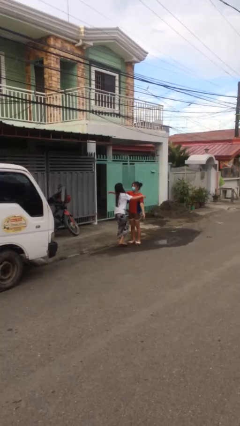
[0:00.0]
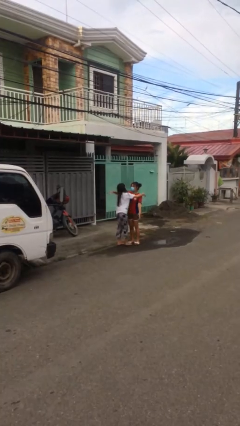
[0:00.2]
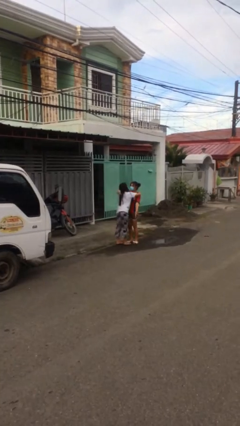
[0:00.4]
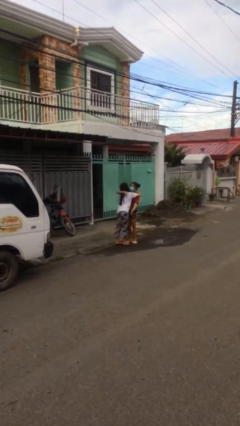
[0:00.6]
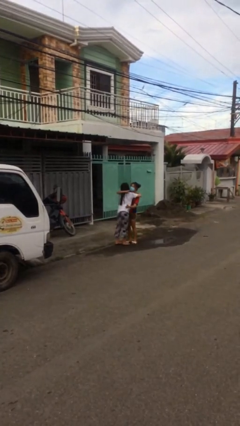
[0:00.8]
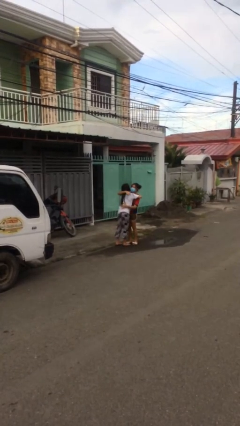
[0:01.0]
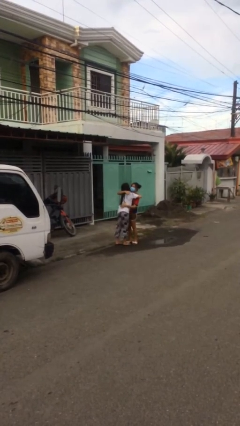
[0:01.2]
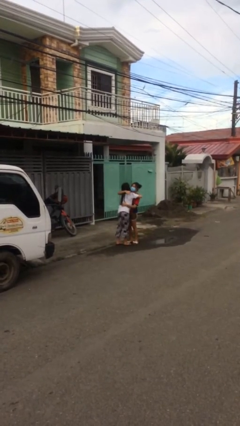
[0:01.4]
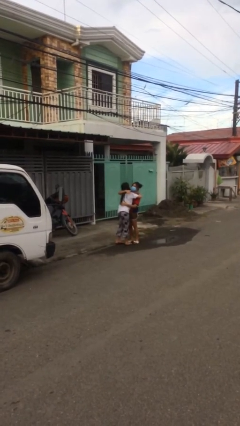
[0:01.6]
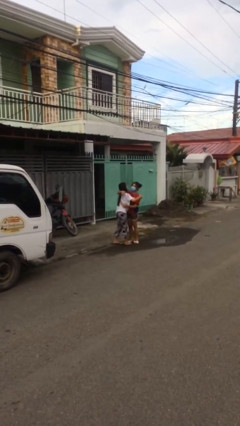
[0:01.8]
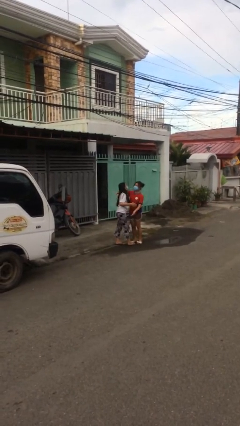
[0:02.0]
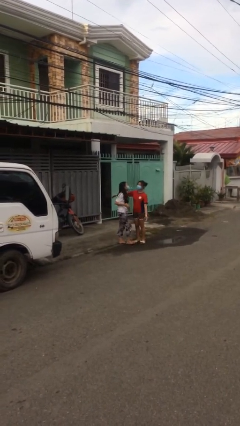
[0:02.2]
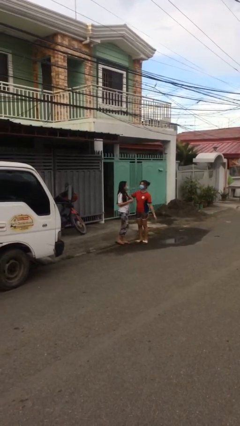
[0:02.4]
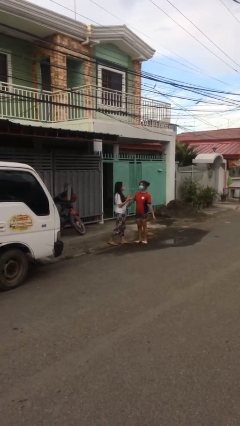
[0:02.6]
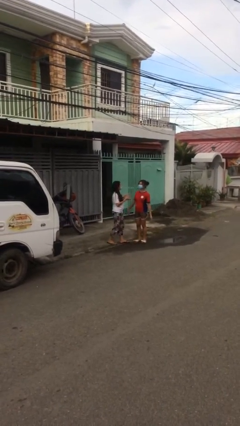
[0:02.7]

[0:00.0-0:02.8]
person embraces person

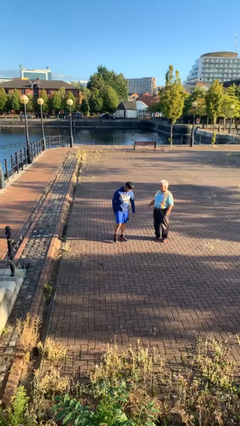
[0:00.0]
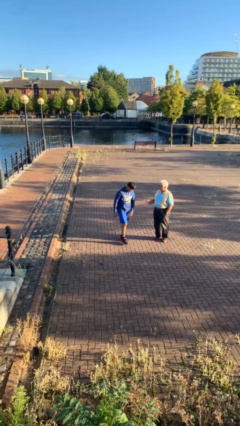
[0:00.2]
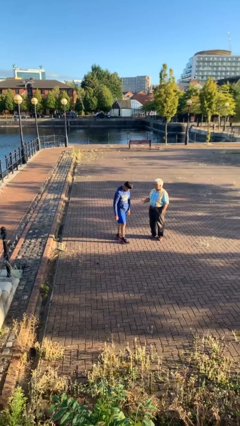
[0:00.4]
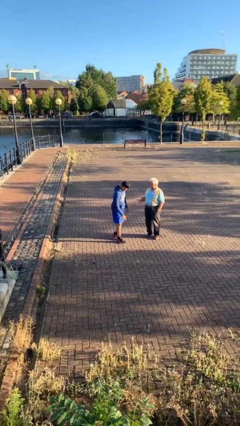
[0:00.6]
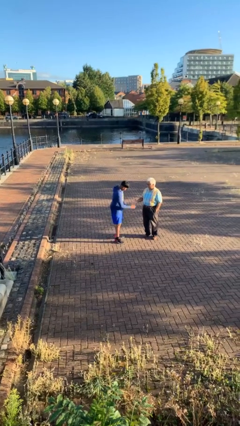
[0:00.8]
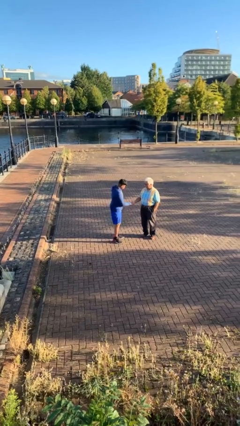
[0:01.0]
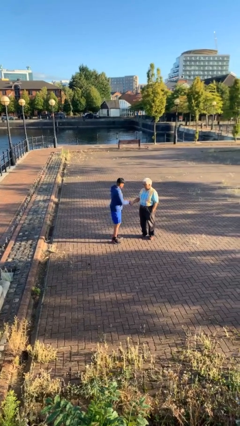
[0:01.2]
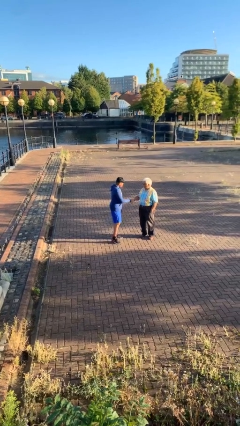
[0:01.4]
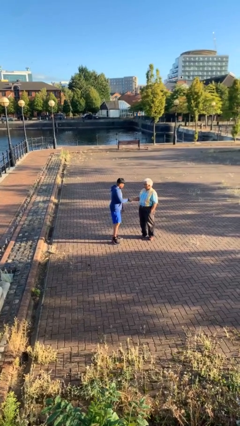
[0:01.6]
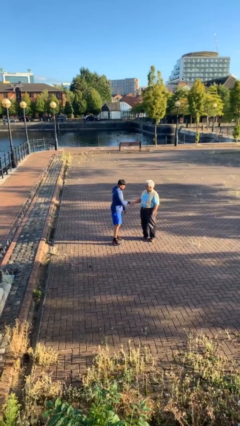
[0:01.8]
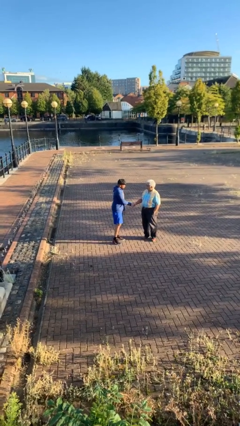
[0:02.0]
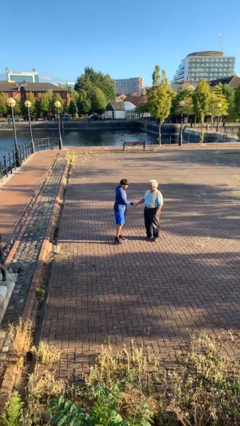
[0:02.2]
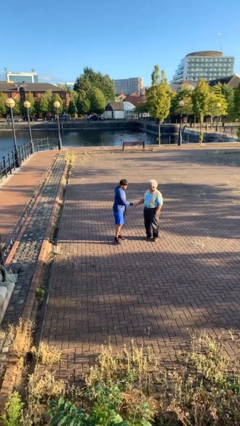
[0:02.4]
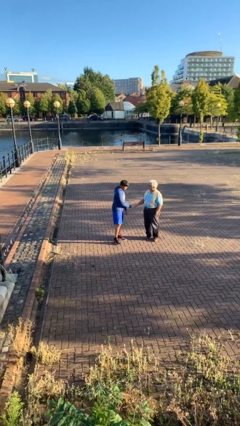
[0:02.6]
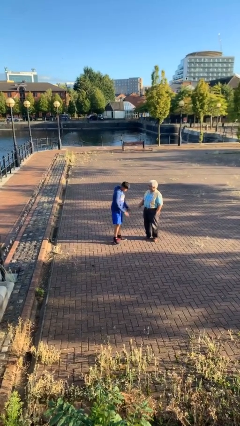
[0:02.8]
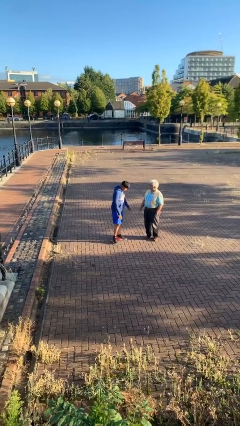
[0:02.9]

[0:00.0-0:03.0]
person shakes hand

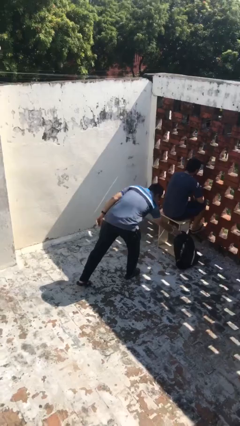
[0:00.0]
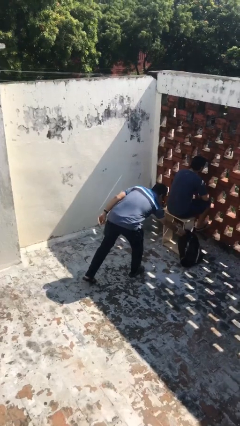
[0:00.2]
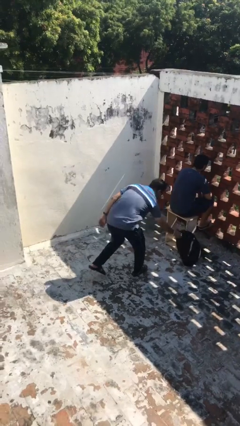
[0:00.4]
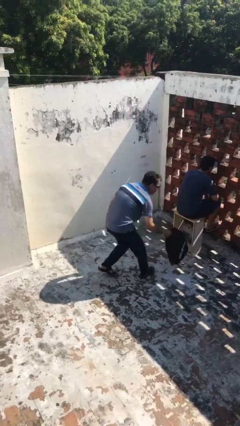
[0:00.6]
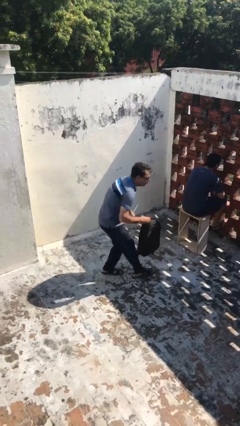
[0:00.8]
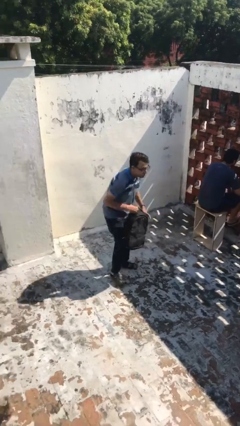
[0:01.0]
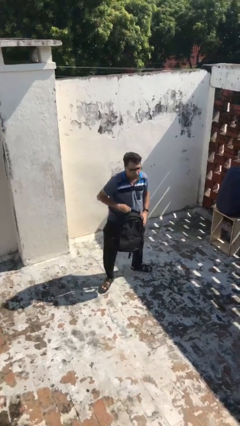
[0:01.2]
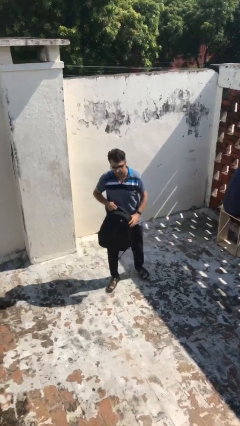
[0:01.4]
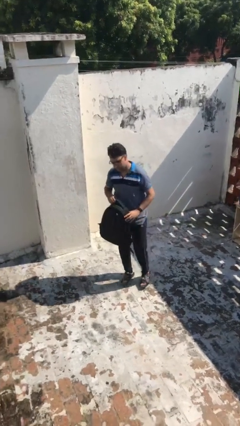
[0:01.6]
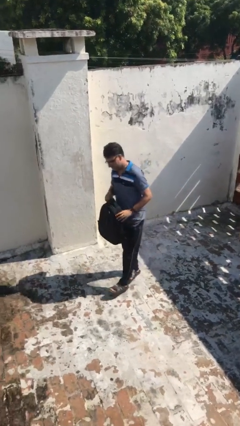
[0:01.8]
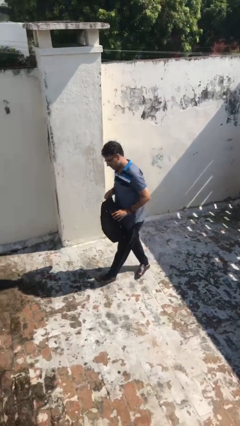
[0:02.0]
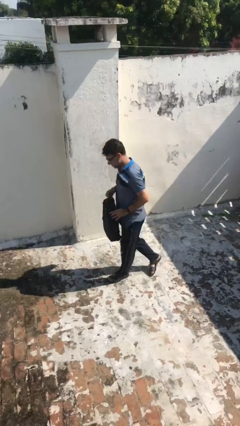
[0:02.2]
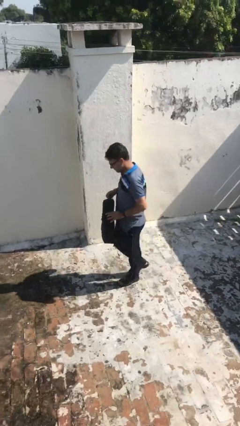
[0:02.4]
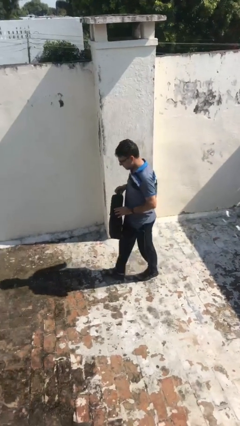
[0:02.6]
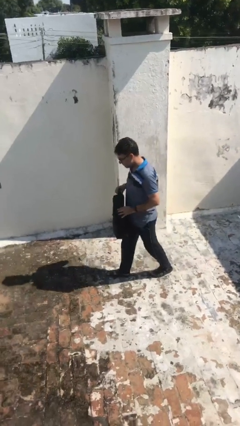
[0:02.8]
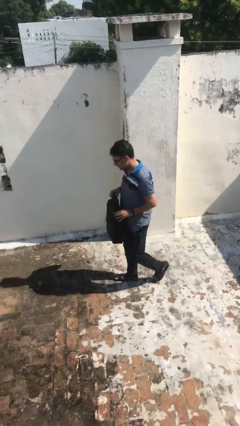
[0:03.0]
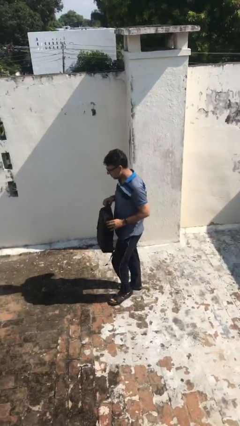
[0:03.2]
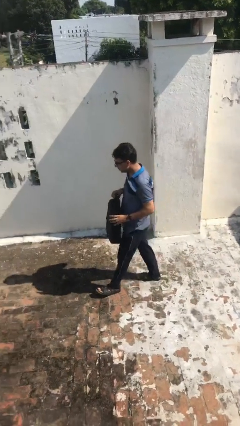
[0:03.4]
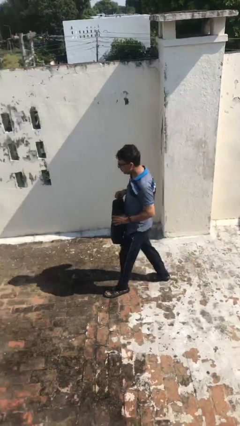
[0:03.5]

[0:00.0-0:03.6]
person steals object from person

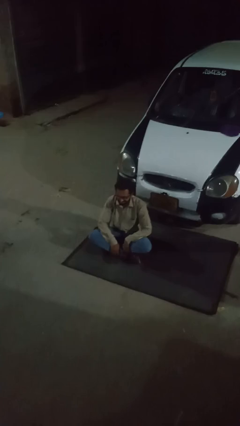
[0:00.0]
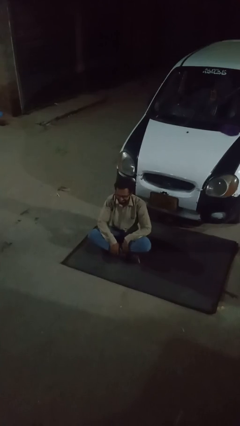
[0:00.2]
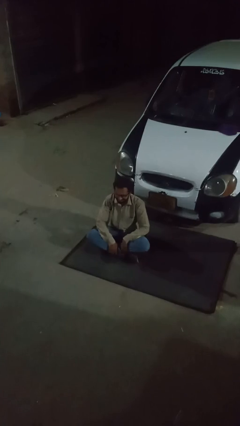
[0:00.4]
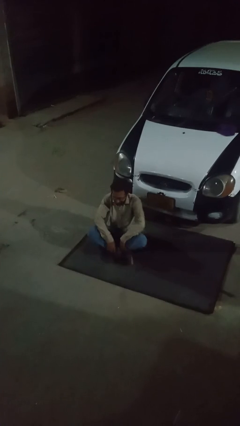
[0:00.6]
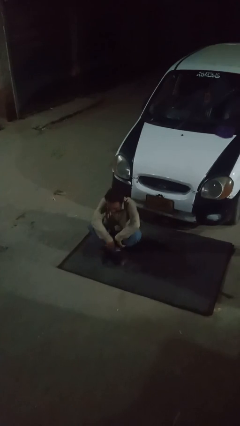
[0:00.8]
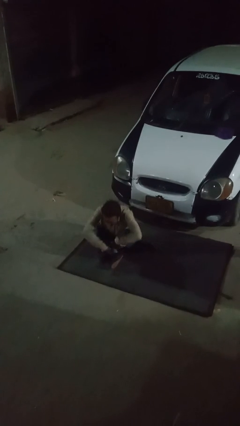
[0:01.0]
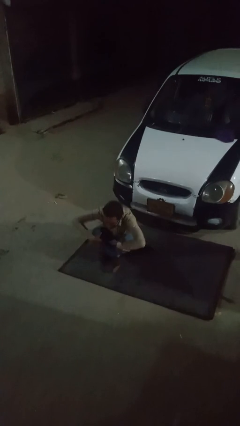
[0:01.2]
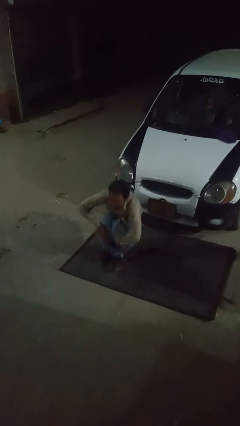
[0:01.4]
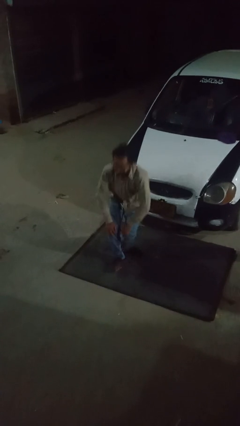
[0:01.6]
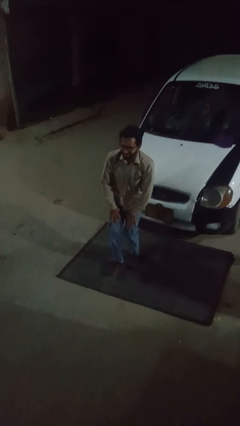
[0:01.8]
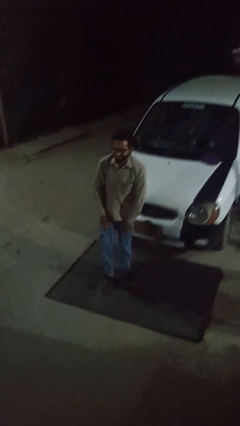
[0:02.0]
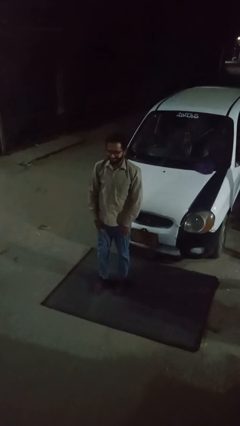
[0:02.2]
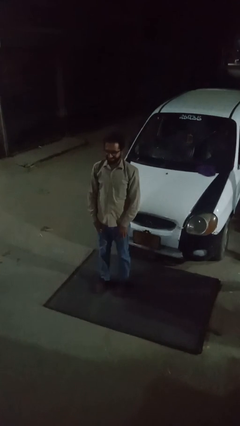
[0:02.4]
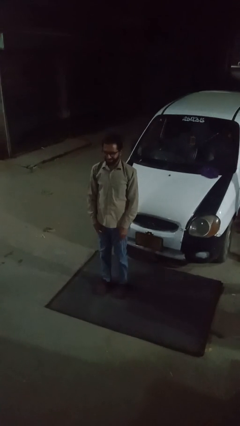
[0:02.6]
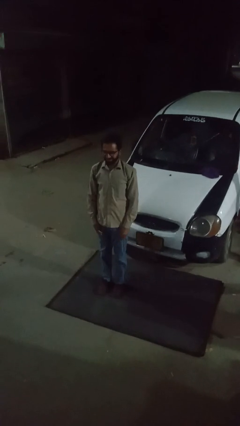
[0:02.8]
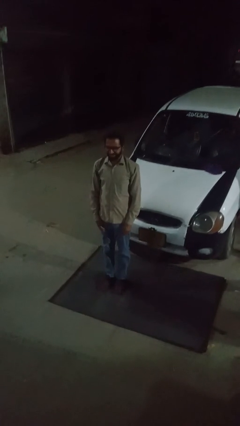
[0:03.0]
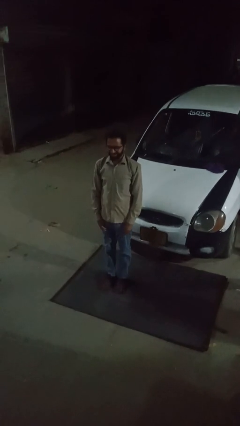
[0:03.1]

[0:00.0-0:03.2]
person stands up from floor

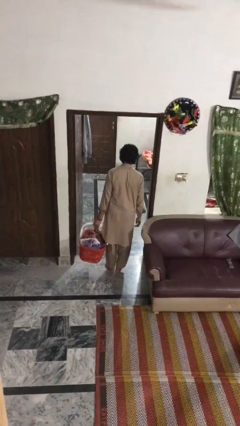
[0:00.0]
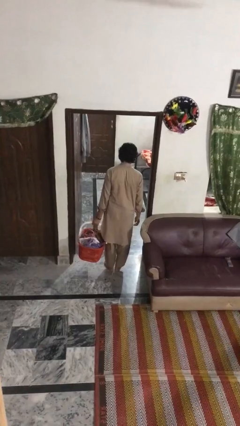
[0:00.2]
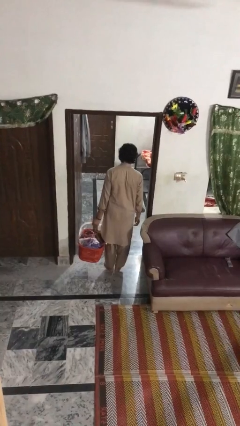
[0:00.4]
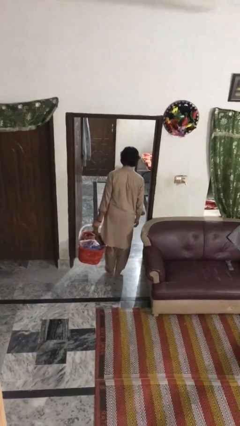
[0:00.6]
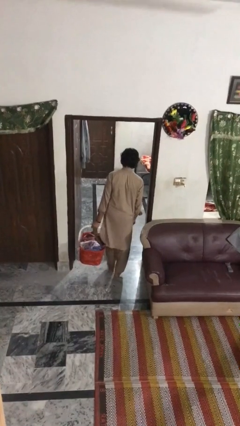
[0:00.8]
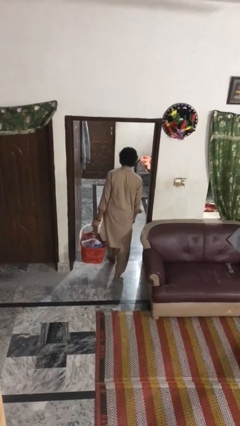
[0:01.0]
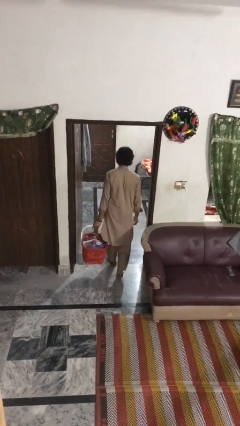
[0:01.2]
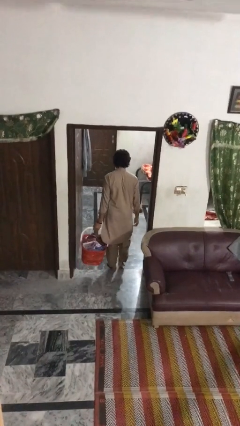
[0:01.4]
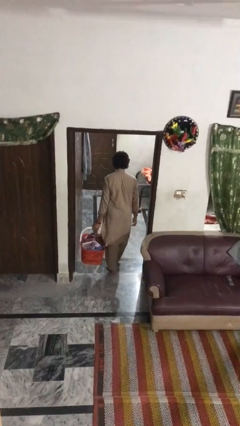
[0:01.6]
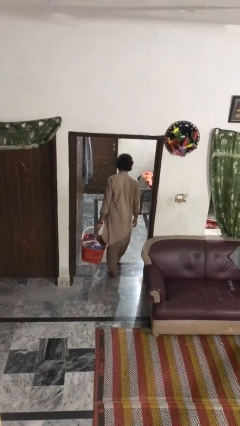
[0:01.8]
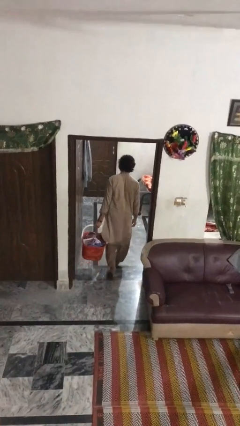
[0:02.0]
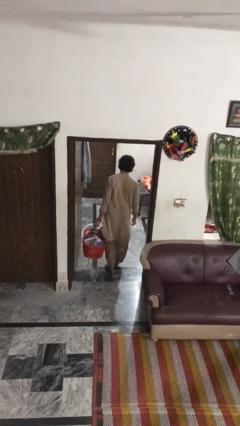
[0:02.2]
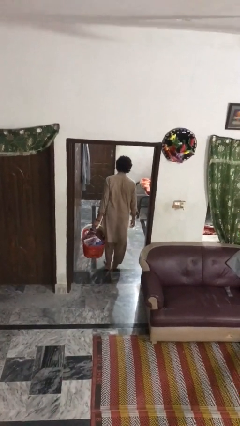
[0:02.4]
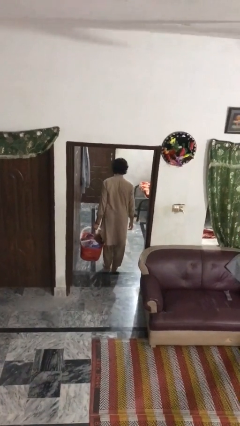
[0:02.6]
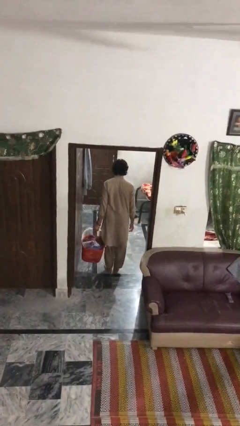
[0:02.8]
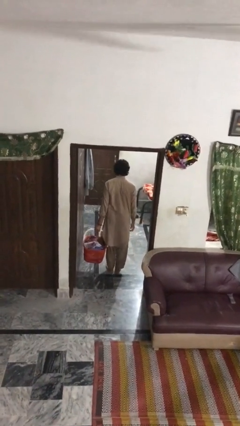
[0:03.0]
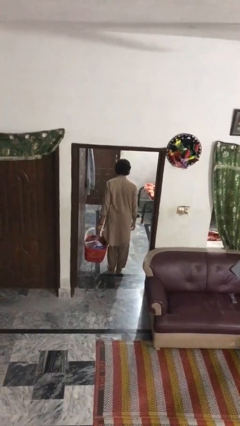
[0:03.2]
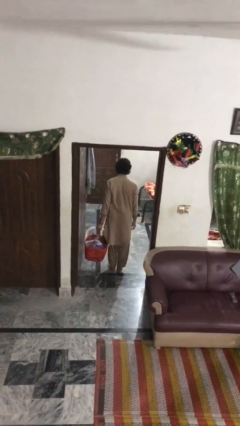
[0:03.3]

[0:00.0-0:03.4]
person carries laundry basket

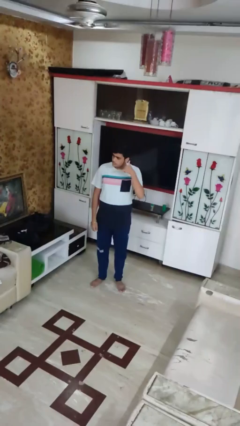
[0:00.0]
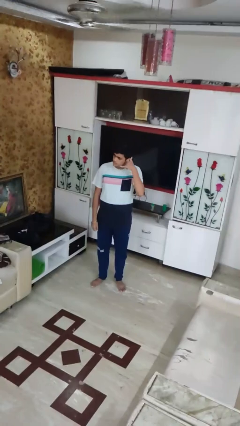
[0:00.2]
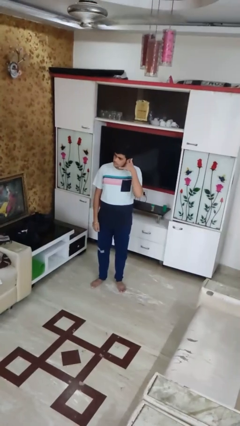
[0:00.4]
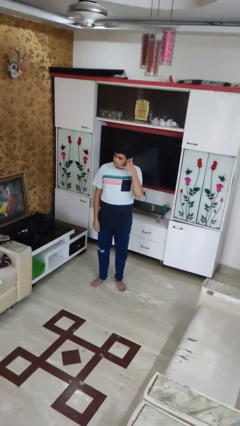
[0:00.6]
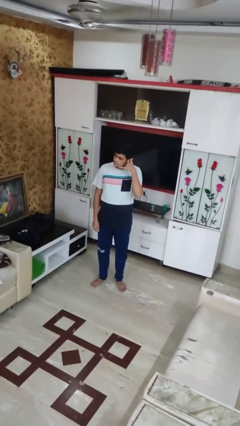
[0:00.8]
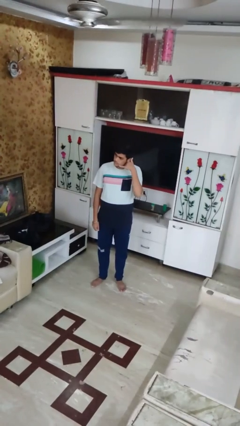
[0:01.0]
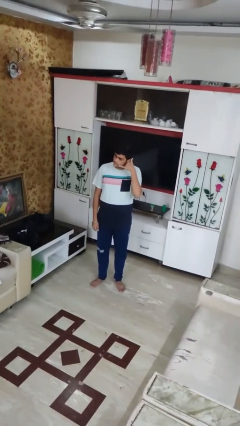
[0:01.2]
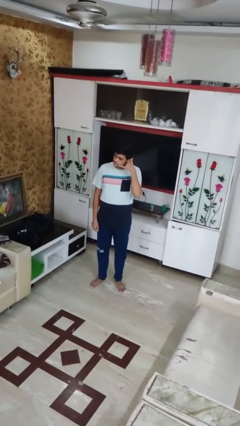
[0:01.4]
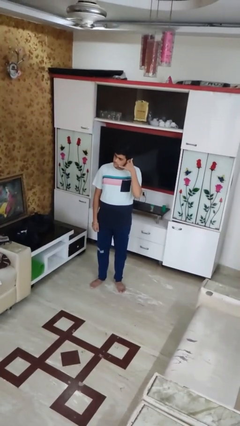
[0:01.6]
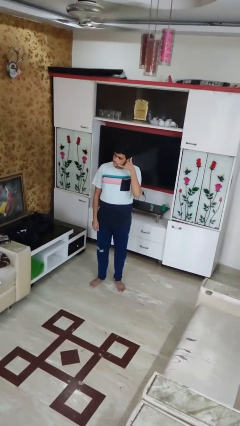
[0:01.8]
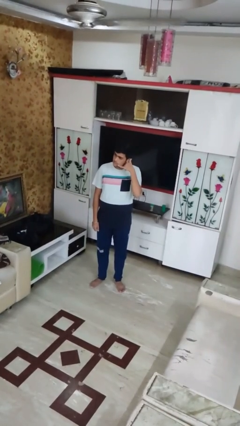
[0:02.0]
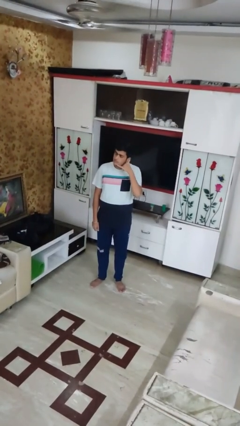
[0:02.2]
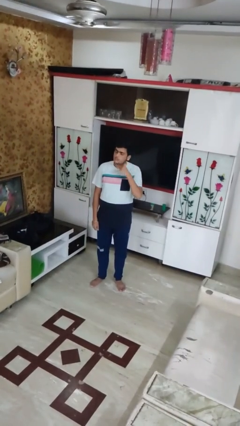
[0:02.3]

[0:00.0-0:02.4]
person gestures call me
